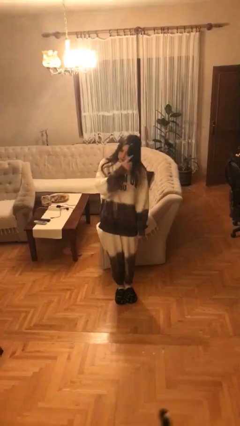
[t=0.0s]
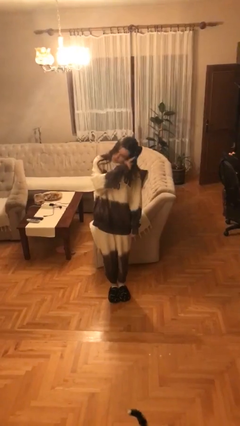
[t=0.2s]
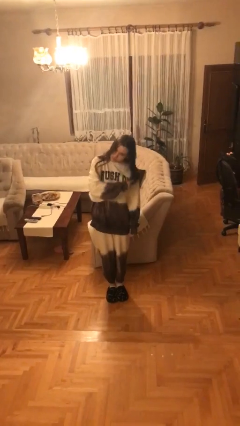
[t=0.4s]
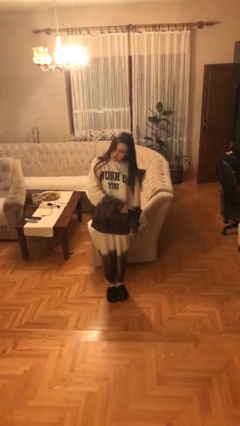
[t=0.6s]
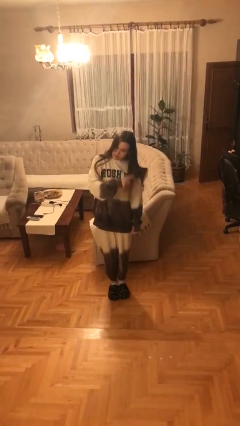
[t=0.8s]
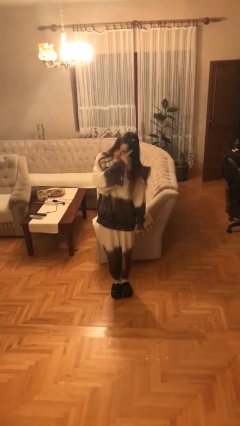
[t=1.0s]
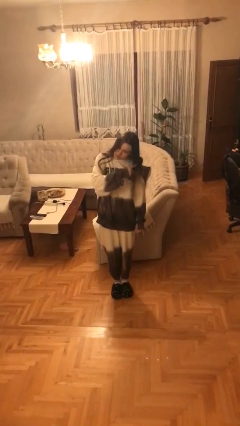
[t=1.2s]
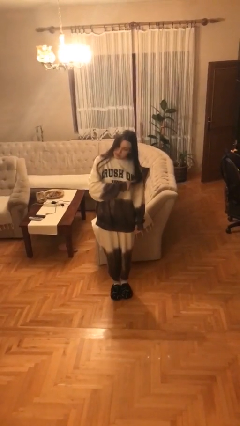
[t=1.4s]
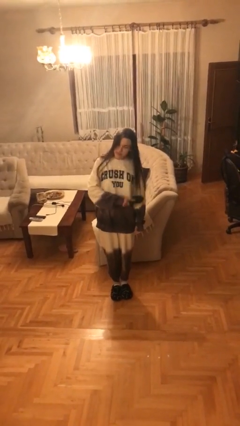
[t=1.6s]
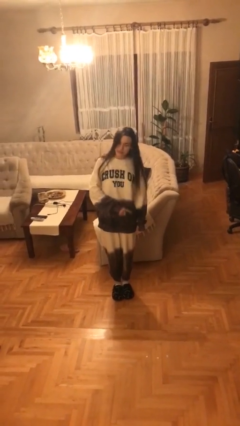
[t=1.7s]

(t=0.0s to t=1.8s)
person brushes hair

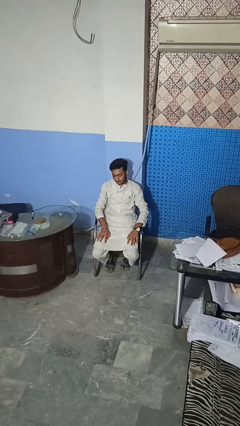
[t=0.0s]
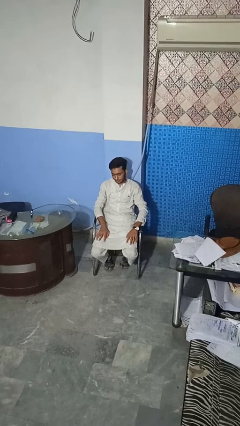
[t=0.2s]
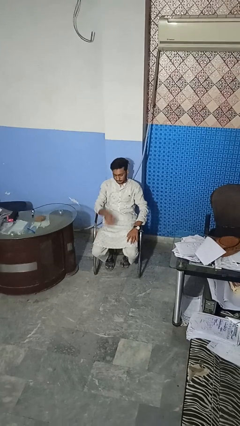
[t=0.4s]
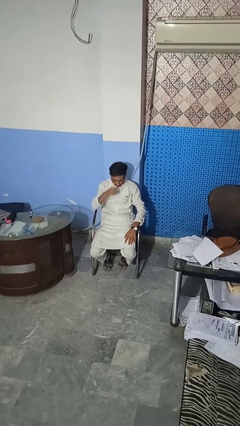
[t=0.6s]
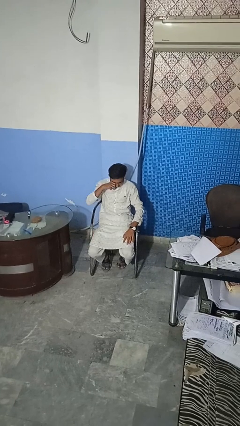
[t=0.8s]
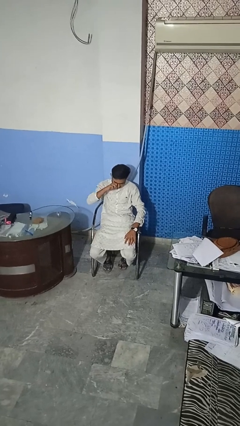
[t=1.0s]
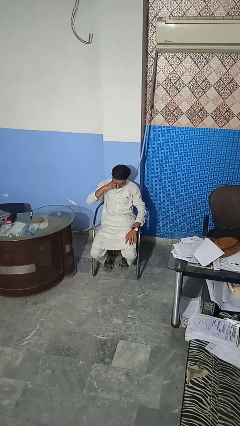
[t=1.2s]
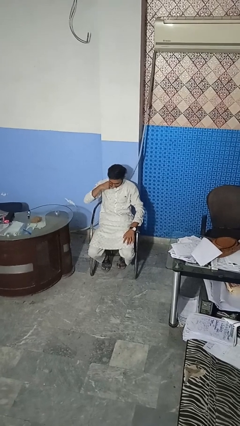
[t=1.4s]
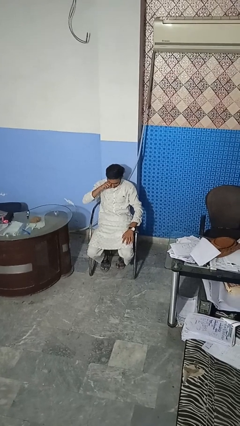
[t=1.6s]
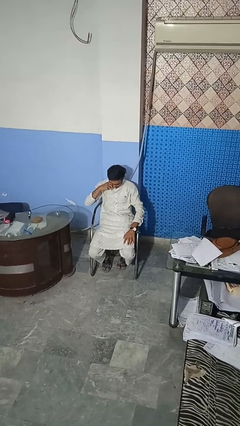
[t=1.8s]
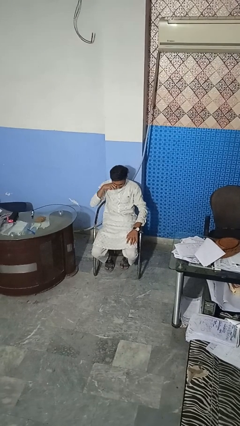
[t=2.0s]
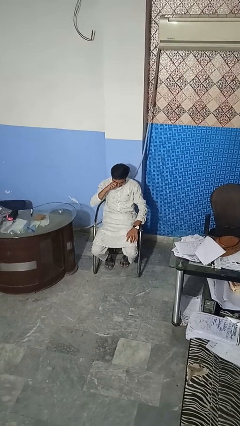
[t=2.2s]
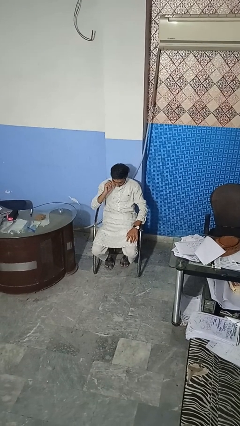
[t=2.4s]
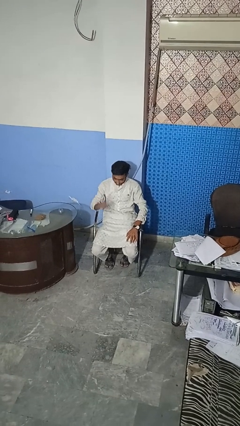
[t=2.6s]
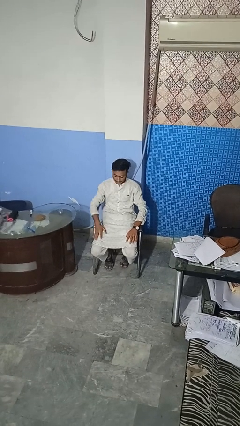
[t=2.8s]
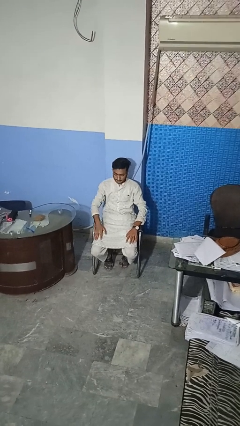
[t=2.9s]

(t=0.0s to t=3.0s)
person rubs eyes

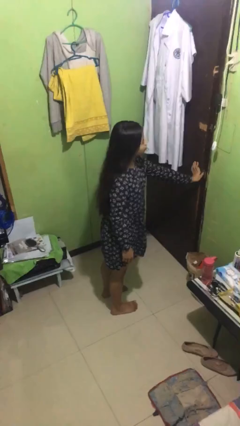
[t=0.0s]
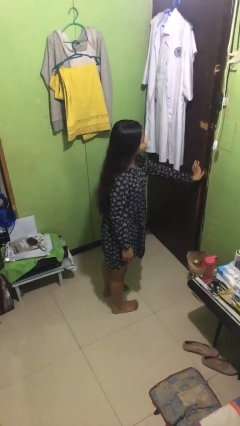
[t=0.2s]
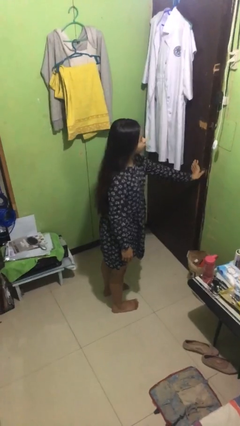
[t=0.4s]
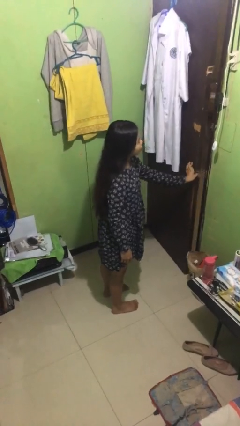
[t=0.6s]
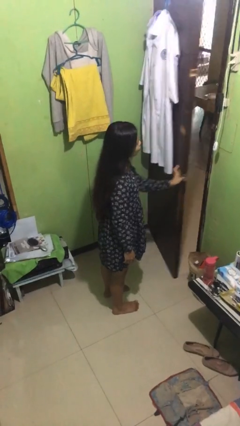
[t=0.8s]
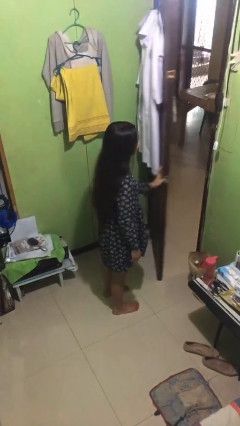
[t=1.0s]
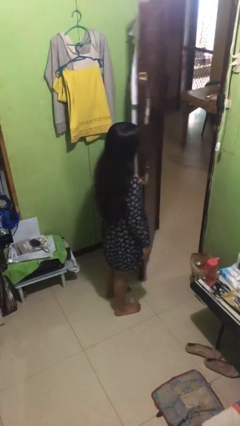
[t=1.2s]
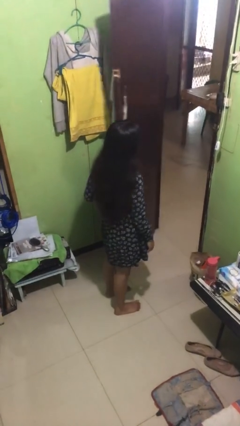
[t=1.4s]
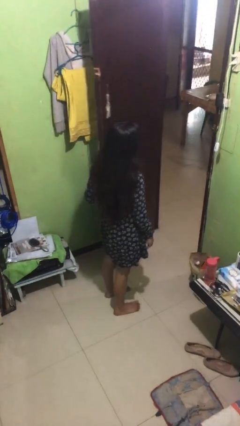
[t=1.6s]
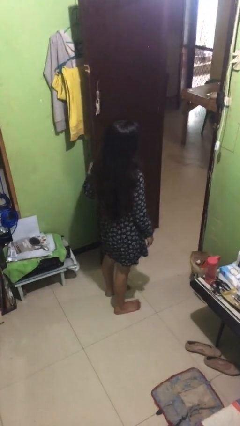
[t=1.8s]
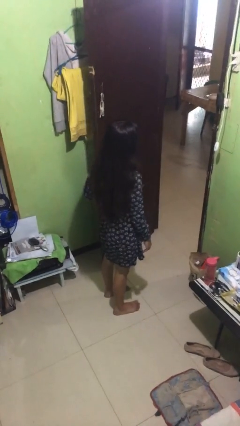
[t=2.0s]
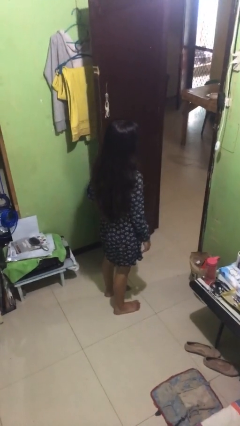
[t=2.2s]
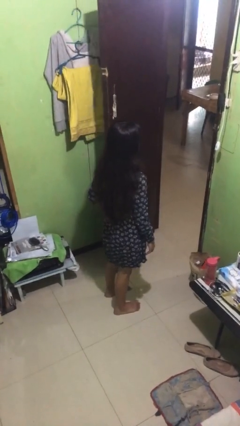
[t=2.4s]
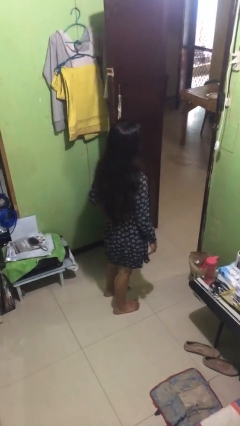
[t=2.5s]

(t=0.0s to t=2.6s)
person opens facility door

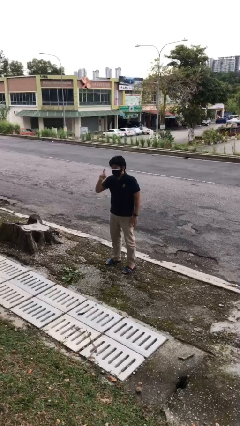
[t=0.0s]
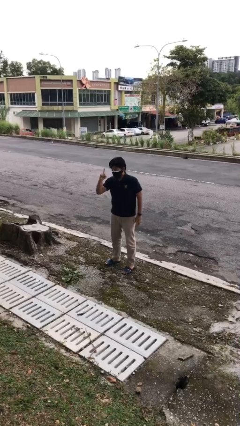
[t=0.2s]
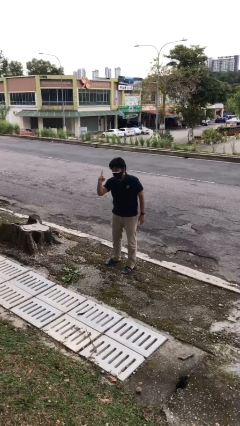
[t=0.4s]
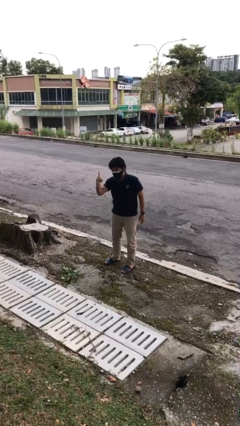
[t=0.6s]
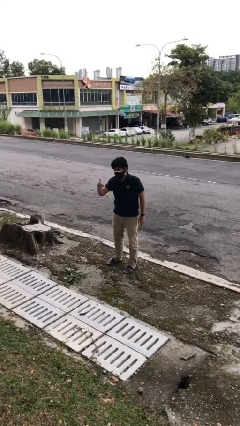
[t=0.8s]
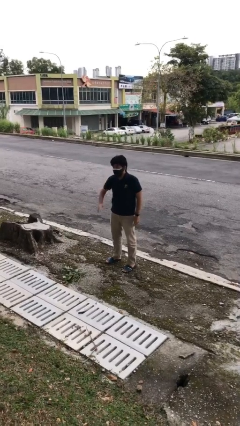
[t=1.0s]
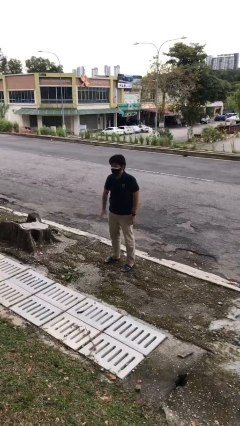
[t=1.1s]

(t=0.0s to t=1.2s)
person gestures number one

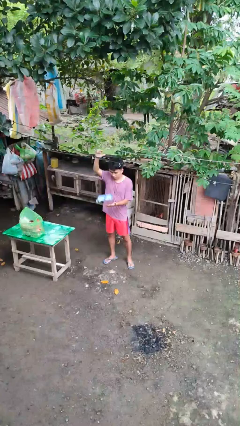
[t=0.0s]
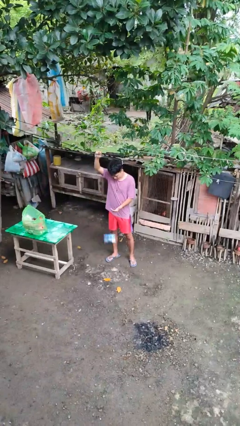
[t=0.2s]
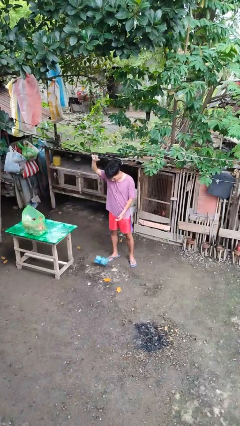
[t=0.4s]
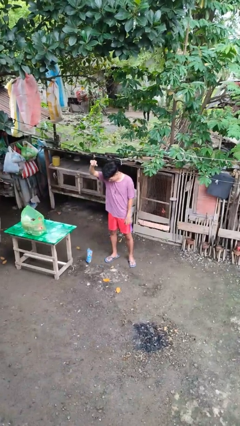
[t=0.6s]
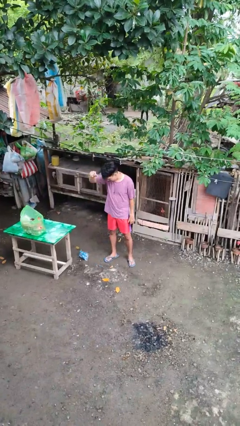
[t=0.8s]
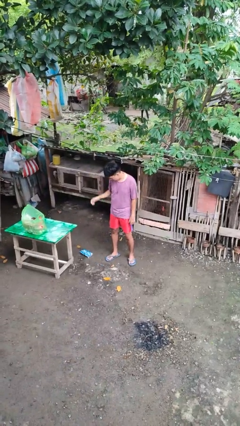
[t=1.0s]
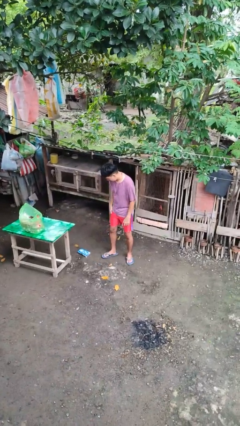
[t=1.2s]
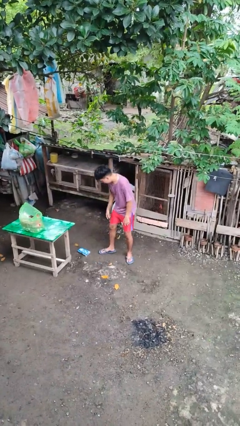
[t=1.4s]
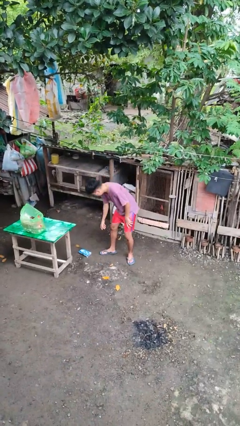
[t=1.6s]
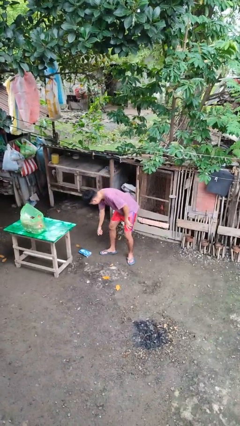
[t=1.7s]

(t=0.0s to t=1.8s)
person drops object

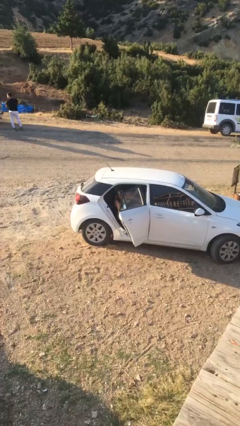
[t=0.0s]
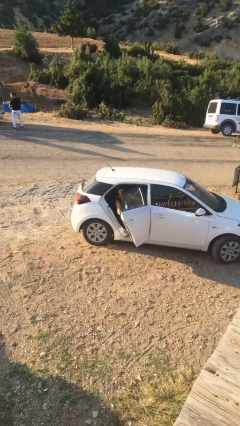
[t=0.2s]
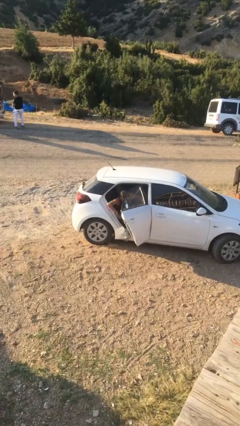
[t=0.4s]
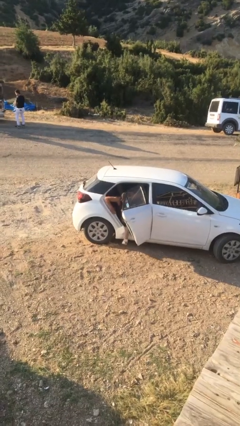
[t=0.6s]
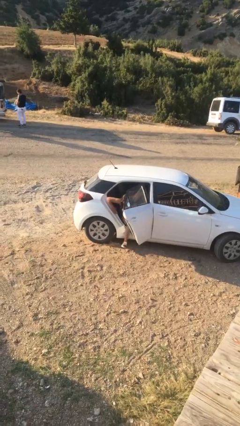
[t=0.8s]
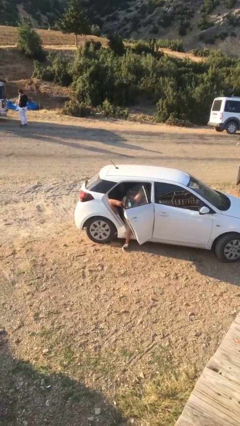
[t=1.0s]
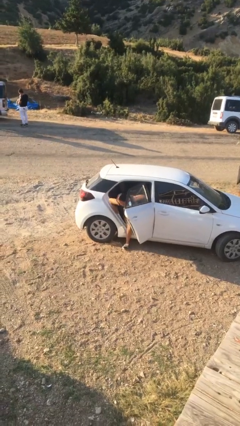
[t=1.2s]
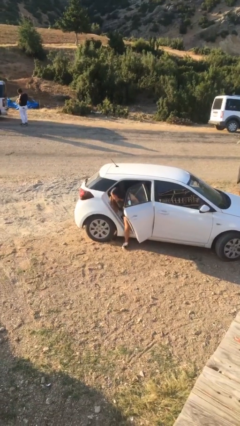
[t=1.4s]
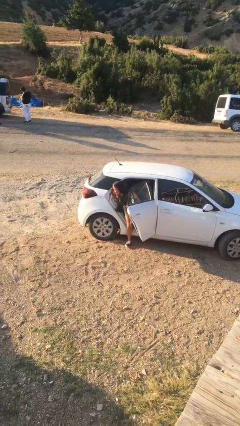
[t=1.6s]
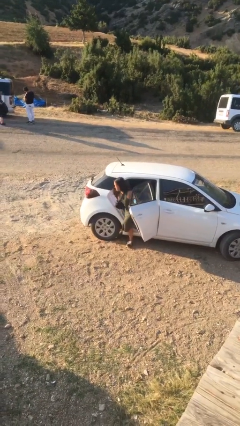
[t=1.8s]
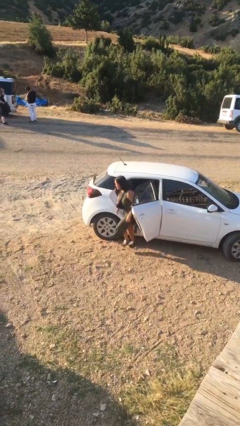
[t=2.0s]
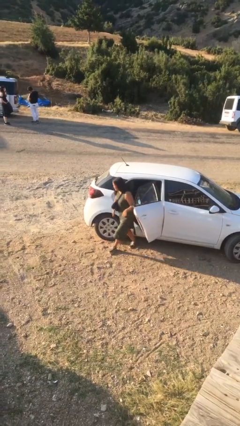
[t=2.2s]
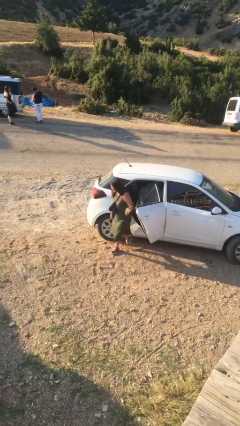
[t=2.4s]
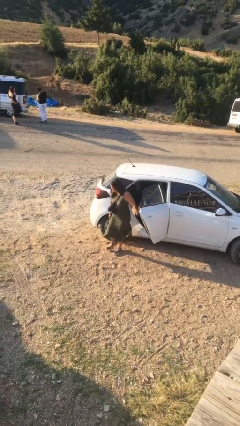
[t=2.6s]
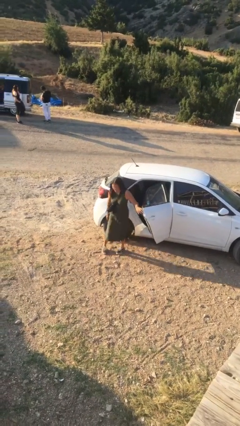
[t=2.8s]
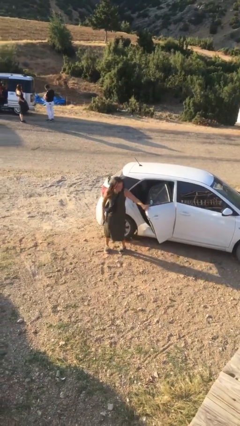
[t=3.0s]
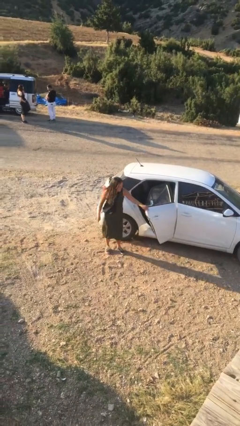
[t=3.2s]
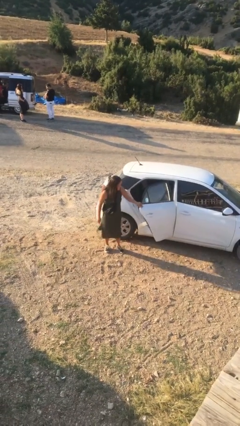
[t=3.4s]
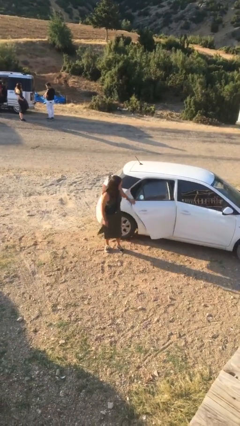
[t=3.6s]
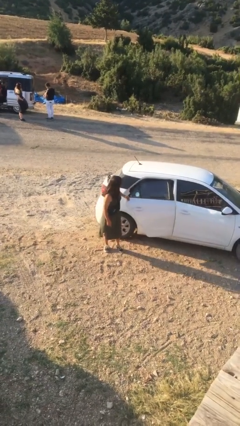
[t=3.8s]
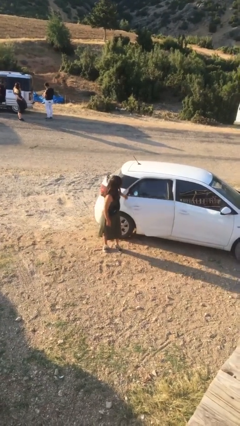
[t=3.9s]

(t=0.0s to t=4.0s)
person exits car

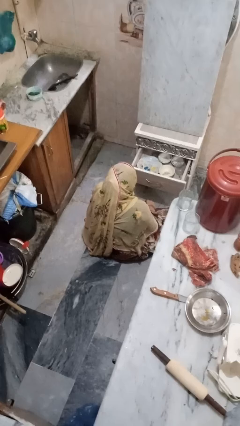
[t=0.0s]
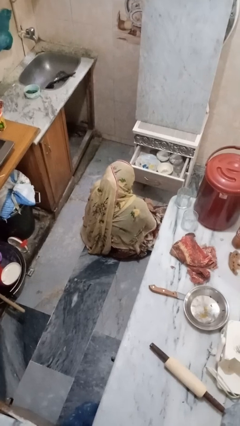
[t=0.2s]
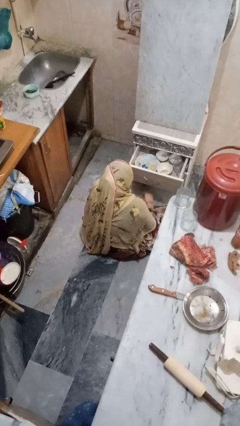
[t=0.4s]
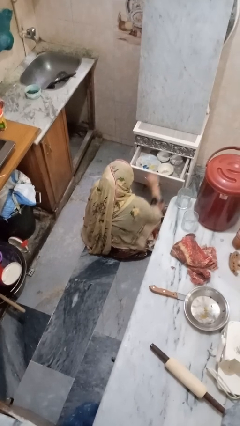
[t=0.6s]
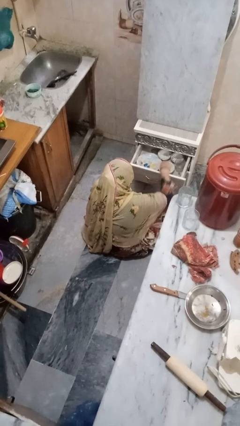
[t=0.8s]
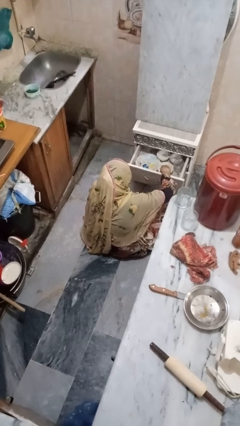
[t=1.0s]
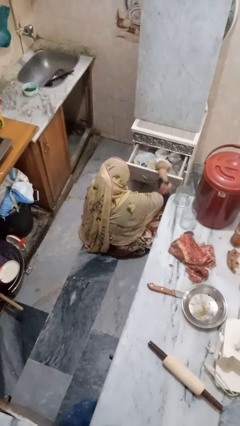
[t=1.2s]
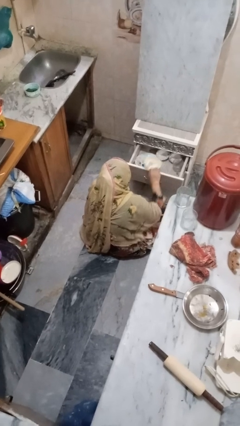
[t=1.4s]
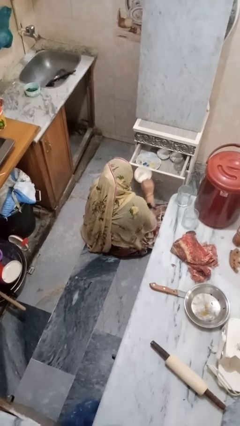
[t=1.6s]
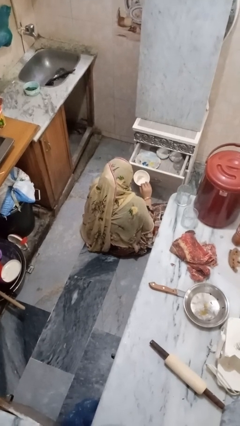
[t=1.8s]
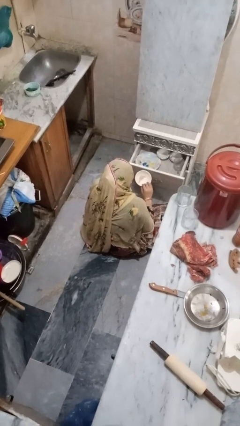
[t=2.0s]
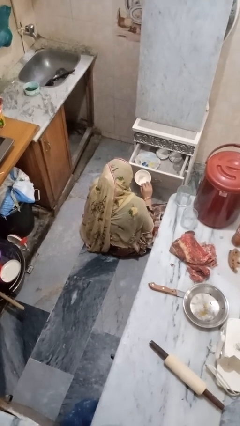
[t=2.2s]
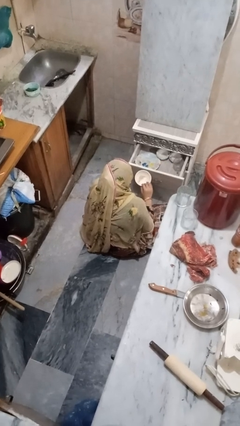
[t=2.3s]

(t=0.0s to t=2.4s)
person takes object from kitchen drawer

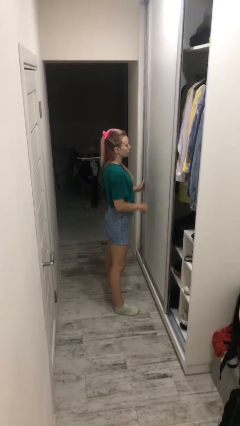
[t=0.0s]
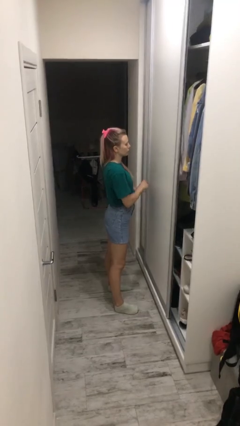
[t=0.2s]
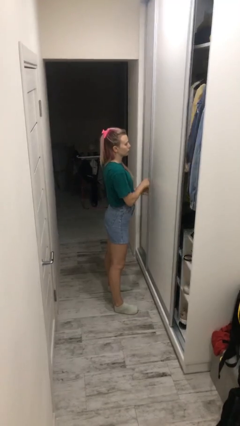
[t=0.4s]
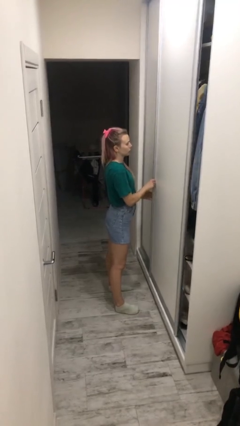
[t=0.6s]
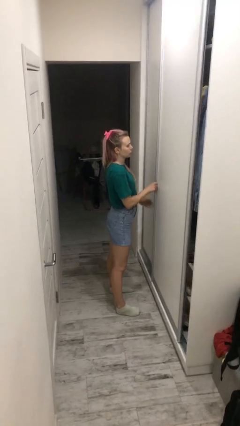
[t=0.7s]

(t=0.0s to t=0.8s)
person closes sliding door
